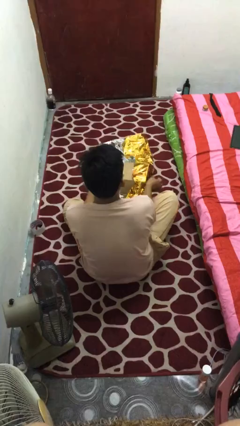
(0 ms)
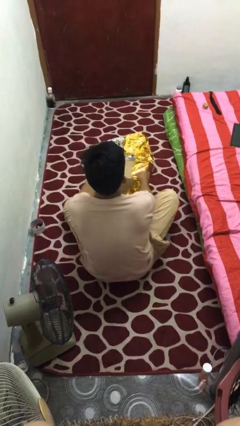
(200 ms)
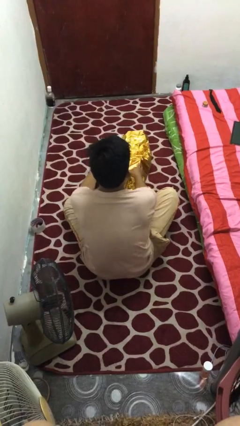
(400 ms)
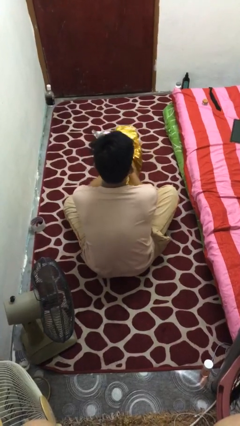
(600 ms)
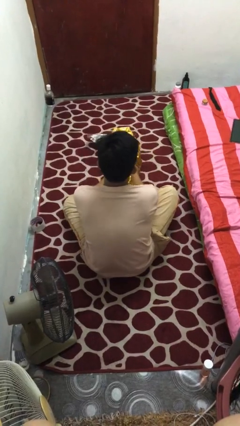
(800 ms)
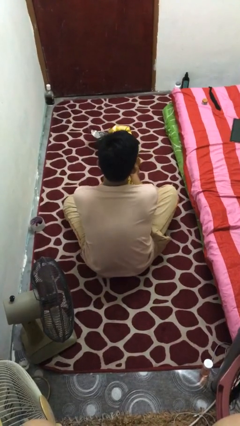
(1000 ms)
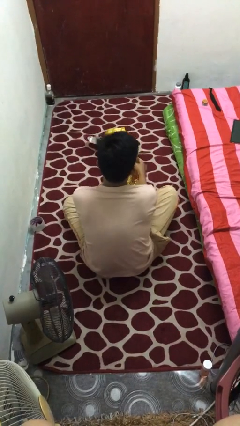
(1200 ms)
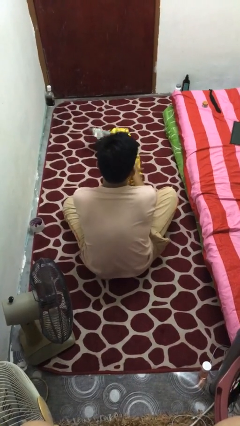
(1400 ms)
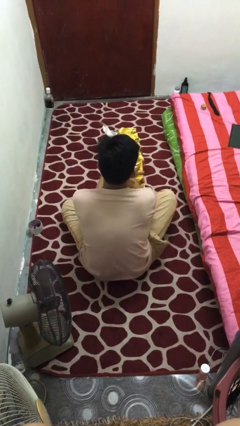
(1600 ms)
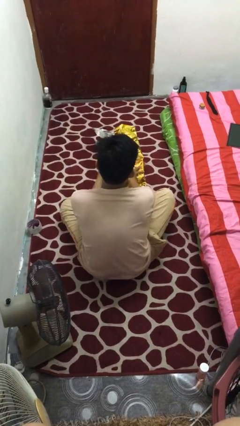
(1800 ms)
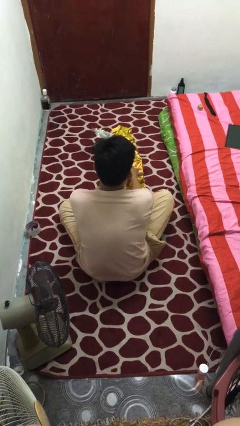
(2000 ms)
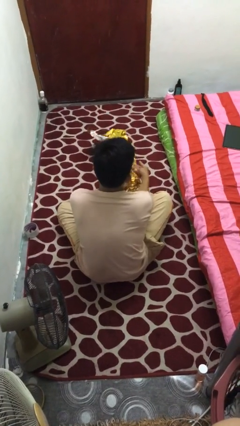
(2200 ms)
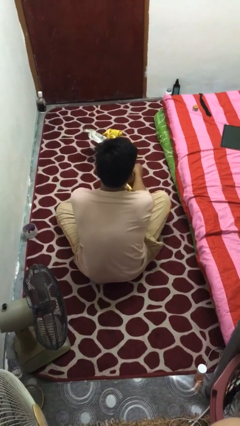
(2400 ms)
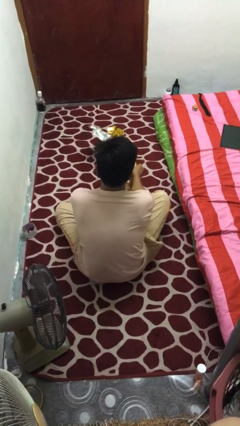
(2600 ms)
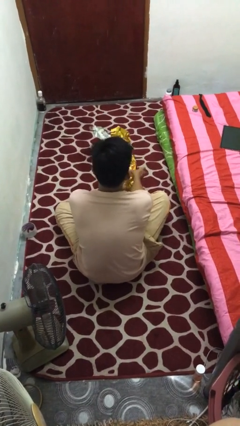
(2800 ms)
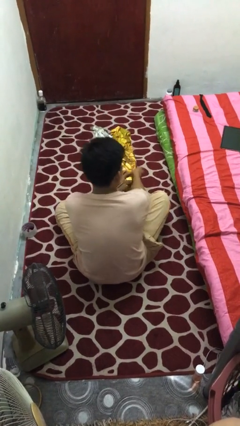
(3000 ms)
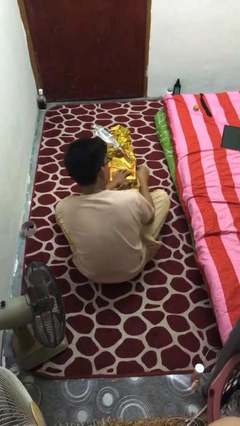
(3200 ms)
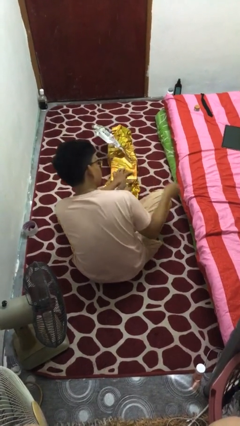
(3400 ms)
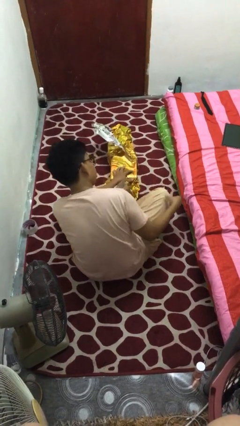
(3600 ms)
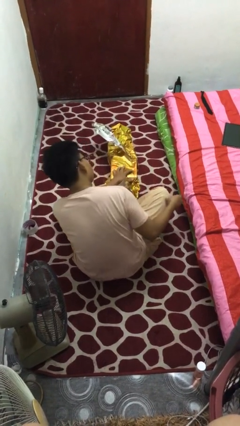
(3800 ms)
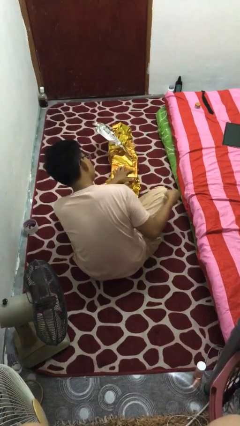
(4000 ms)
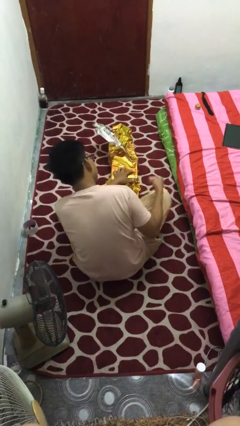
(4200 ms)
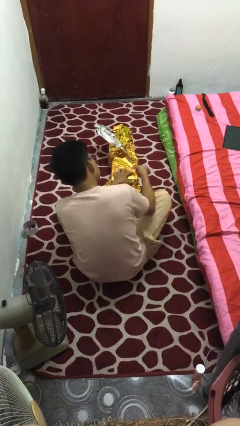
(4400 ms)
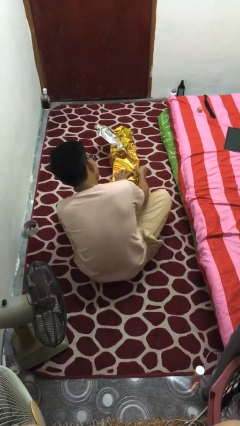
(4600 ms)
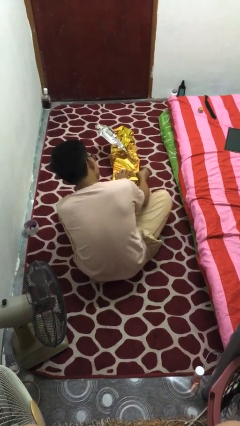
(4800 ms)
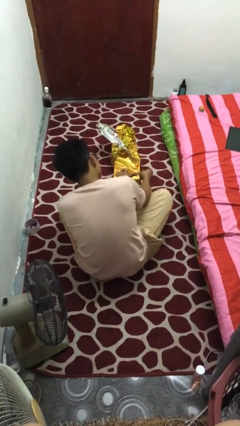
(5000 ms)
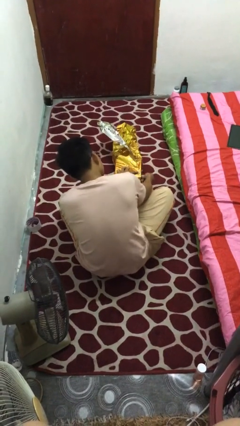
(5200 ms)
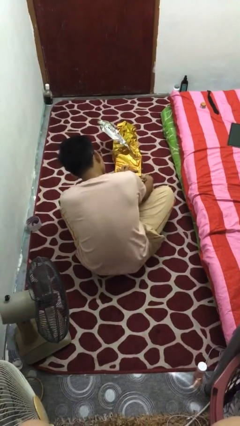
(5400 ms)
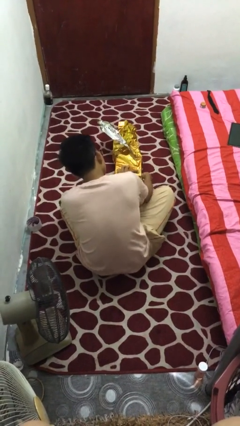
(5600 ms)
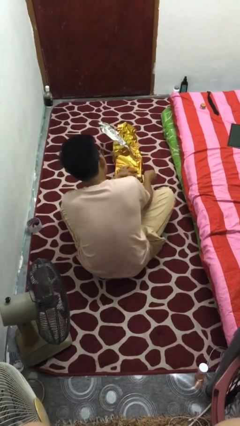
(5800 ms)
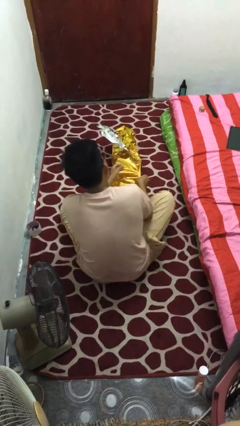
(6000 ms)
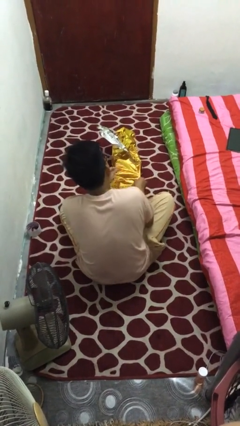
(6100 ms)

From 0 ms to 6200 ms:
person wraps box

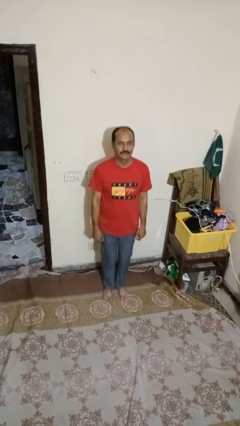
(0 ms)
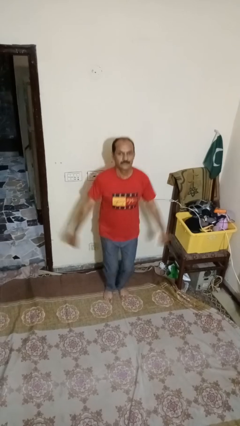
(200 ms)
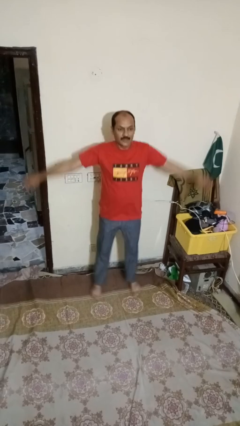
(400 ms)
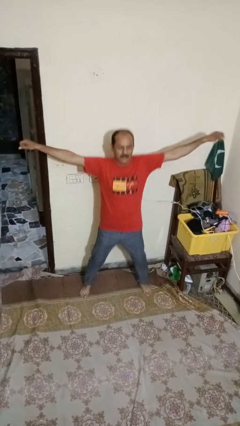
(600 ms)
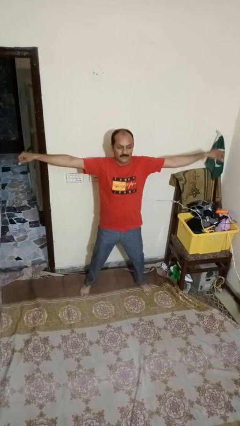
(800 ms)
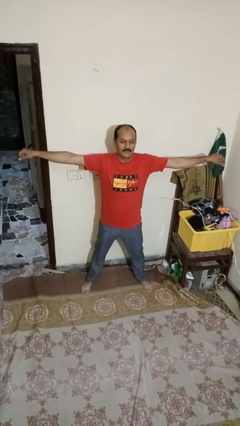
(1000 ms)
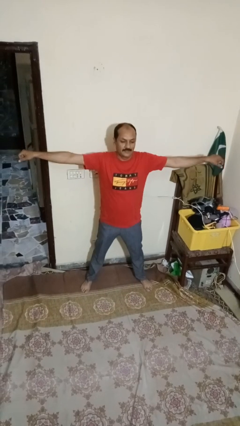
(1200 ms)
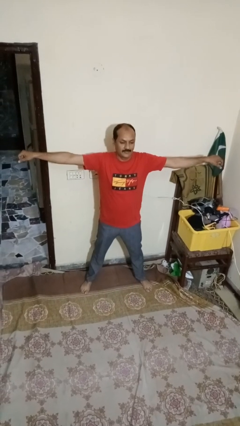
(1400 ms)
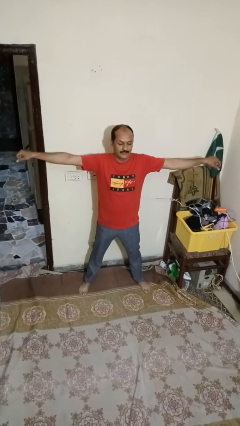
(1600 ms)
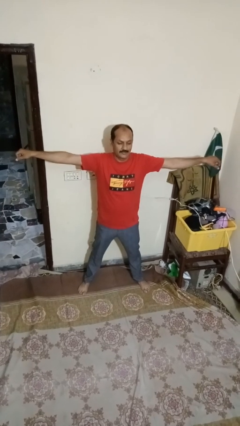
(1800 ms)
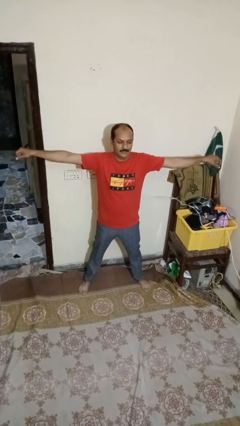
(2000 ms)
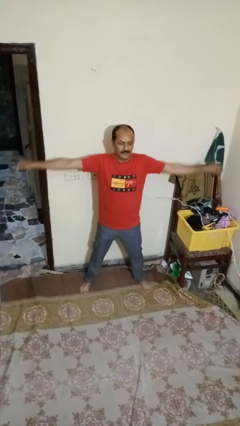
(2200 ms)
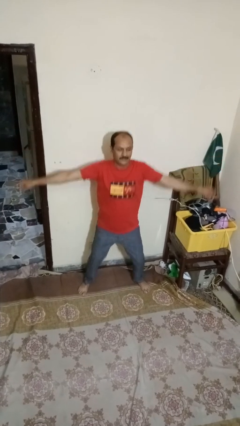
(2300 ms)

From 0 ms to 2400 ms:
person exercises with jumping jacks

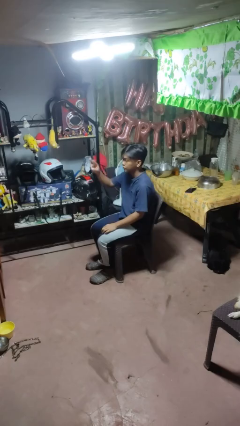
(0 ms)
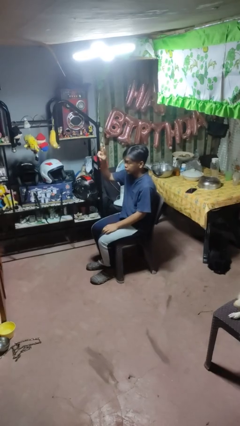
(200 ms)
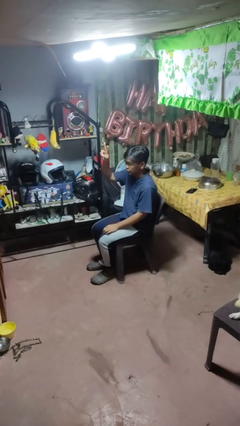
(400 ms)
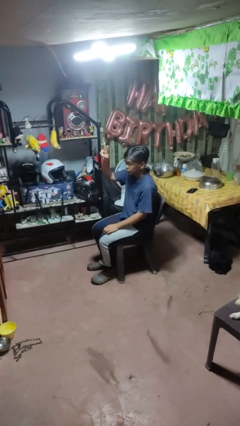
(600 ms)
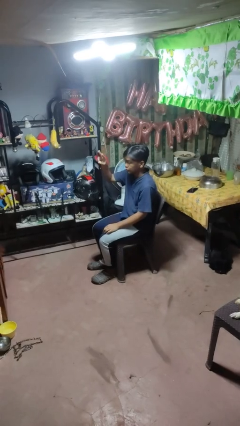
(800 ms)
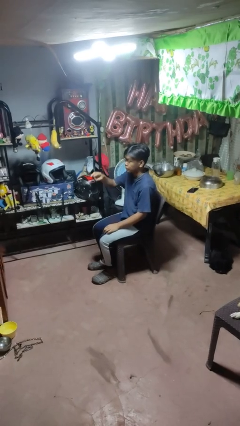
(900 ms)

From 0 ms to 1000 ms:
person gestures peace

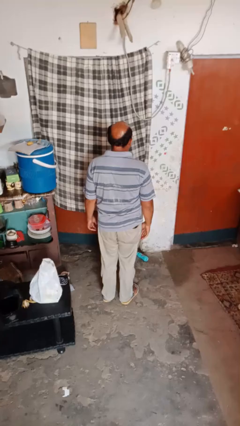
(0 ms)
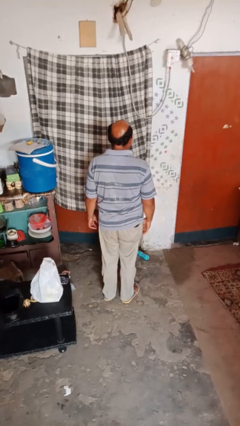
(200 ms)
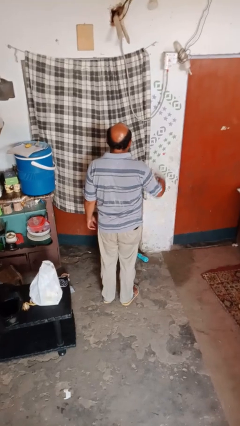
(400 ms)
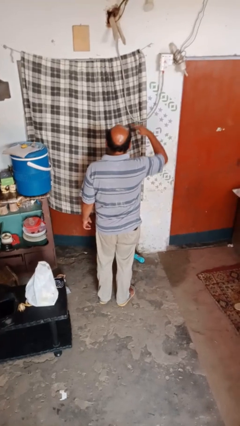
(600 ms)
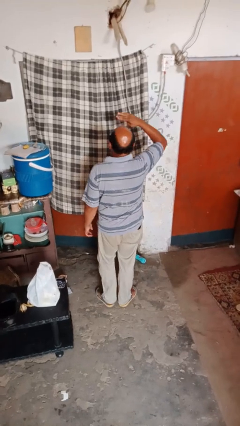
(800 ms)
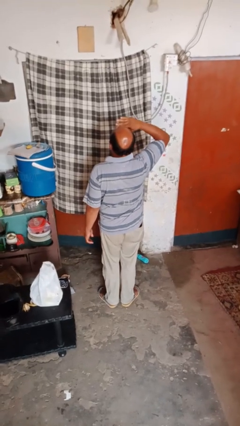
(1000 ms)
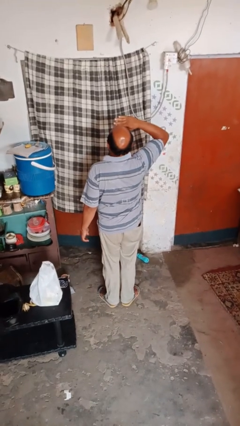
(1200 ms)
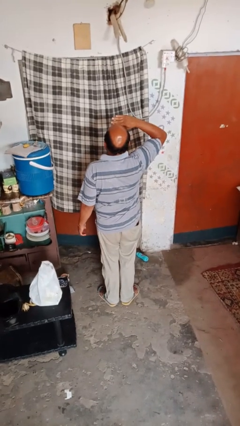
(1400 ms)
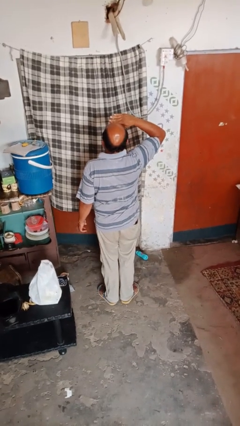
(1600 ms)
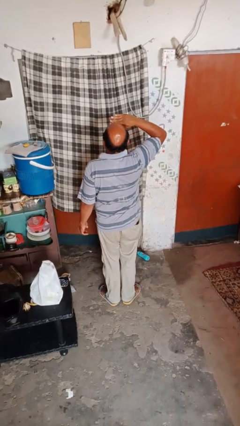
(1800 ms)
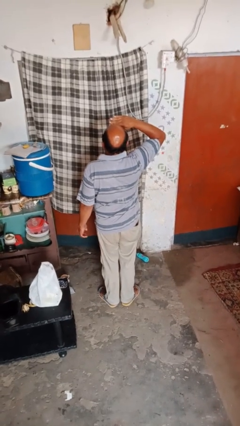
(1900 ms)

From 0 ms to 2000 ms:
person salutes

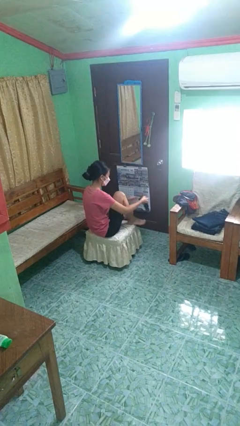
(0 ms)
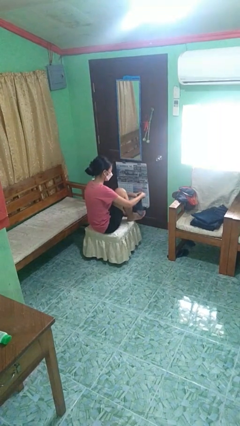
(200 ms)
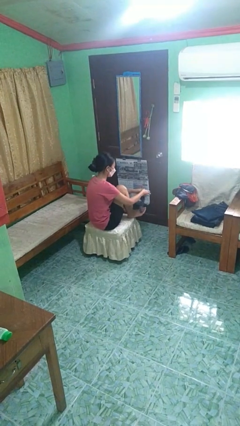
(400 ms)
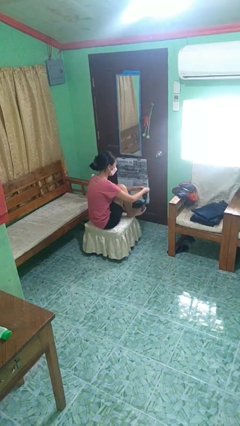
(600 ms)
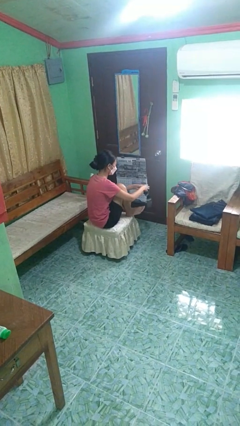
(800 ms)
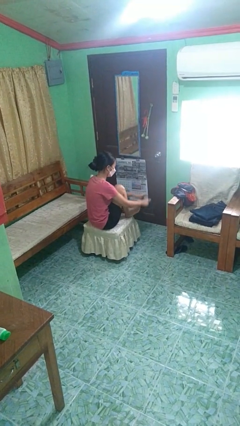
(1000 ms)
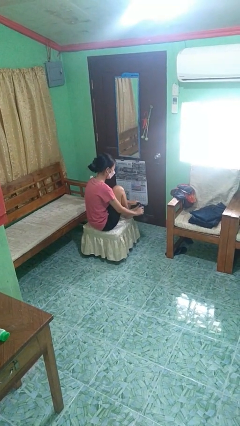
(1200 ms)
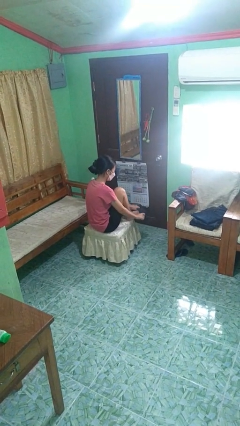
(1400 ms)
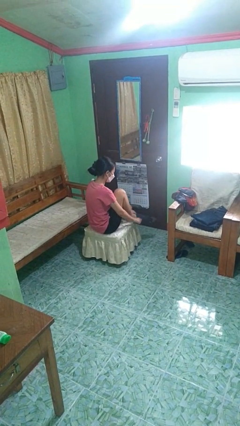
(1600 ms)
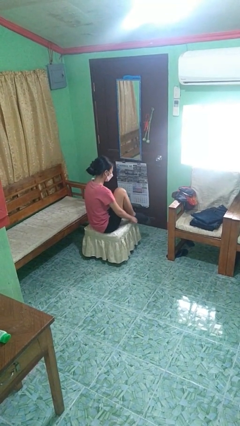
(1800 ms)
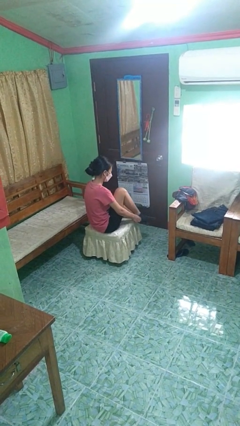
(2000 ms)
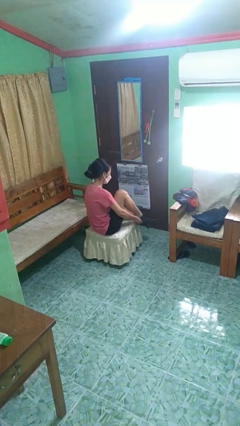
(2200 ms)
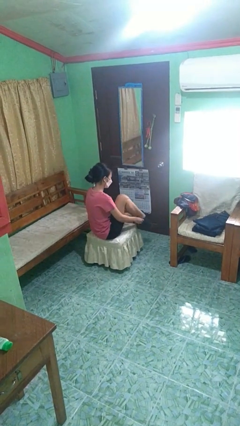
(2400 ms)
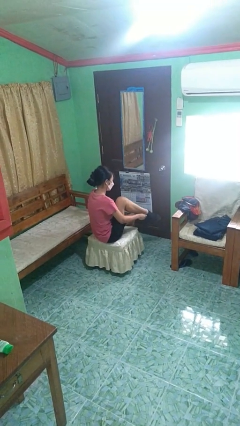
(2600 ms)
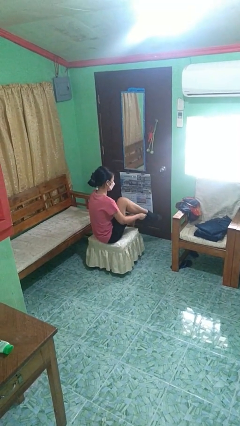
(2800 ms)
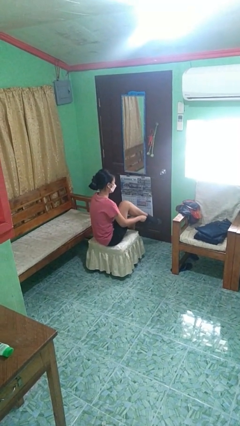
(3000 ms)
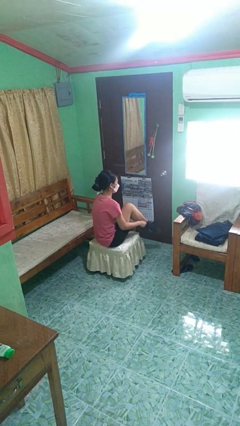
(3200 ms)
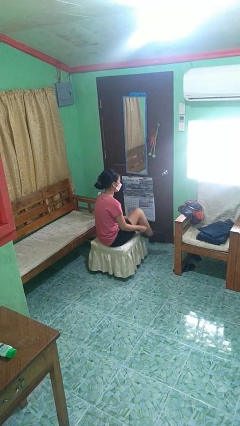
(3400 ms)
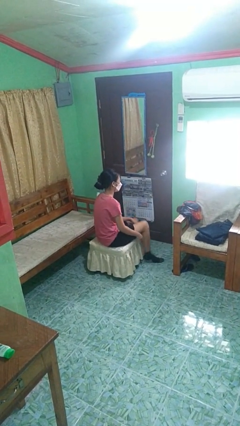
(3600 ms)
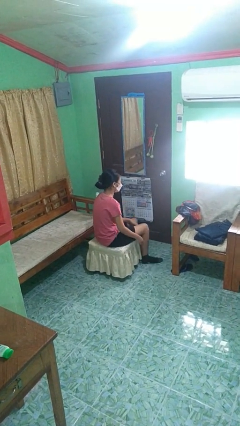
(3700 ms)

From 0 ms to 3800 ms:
person puts on socks

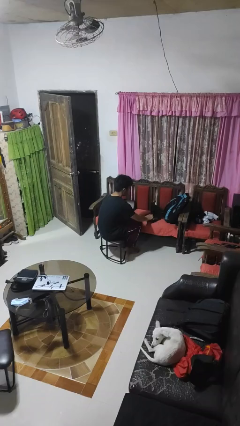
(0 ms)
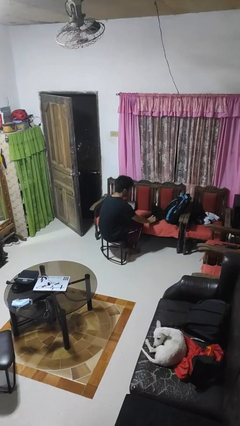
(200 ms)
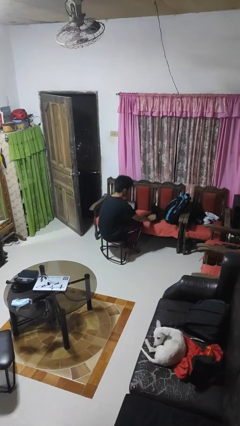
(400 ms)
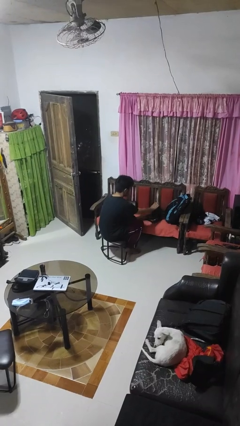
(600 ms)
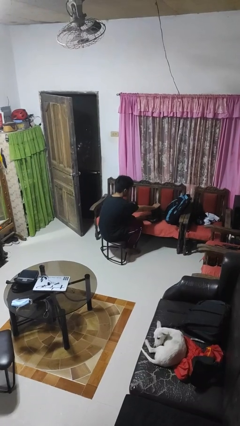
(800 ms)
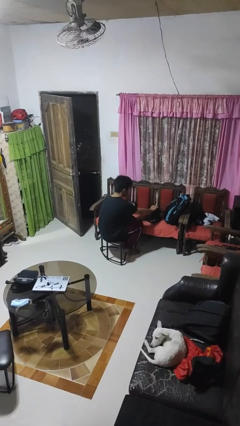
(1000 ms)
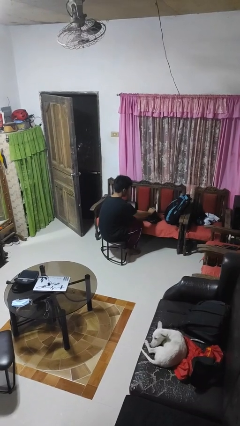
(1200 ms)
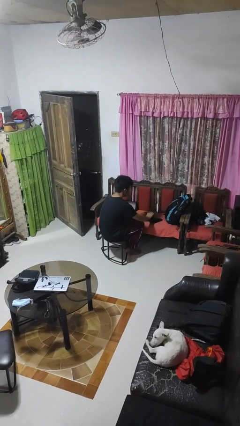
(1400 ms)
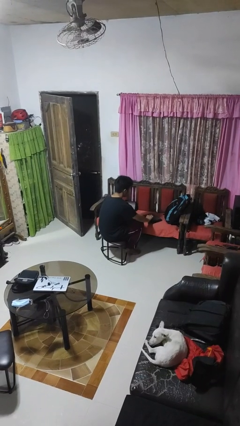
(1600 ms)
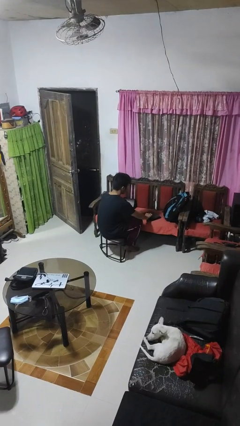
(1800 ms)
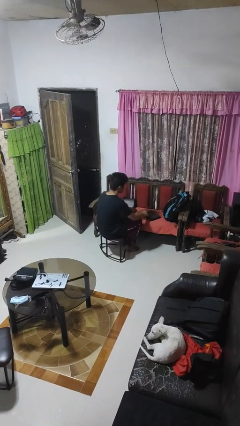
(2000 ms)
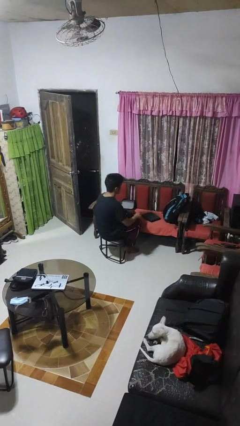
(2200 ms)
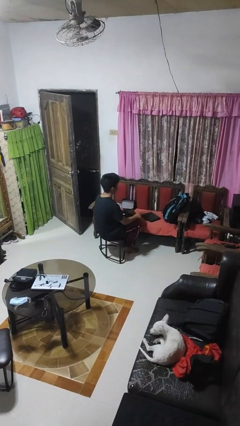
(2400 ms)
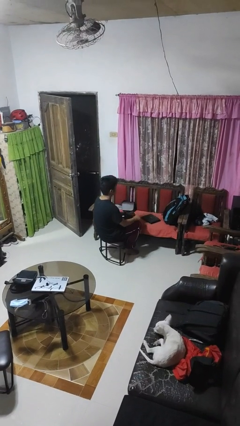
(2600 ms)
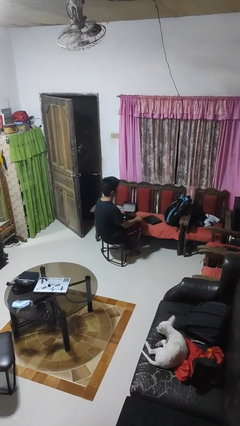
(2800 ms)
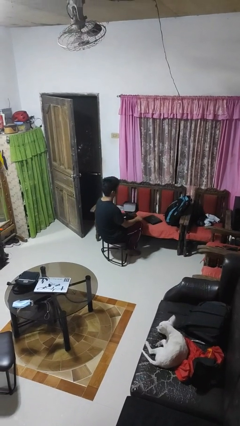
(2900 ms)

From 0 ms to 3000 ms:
person closes laptop
